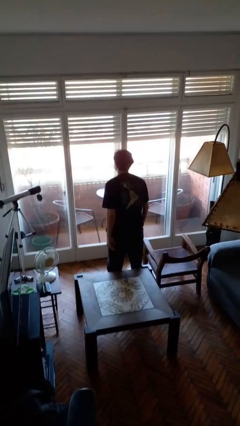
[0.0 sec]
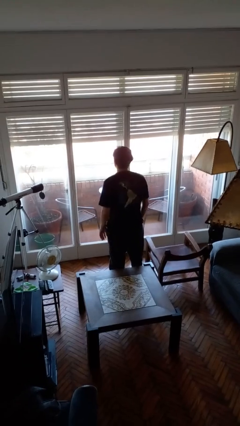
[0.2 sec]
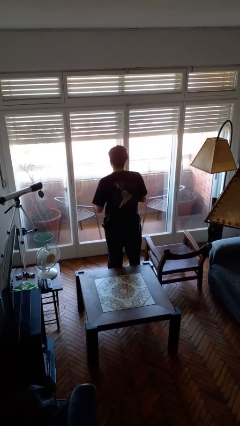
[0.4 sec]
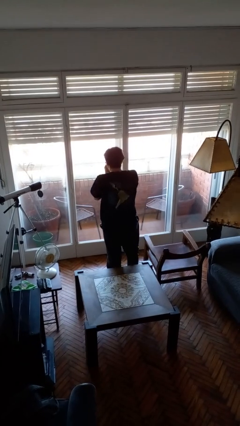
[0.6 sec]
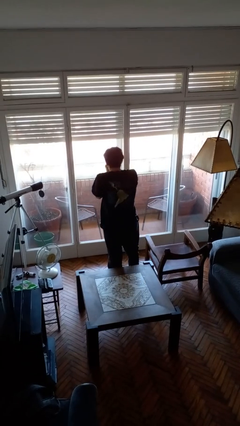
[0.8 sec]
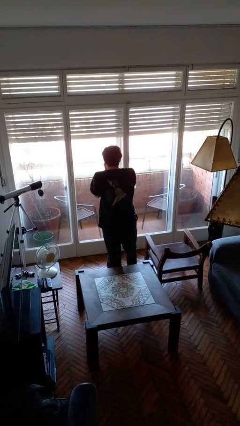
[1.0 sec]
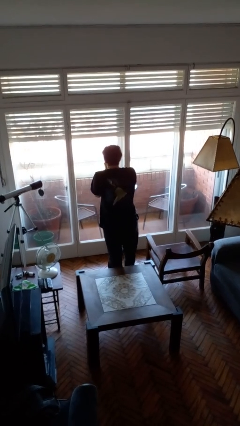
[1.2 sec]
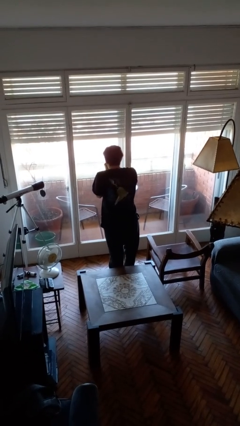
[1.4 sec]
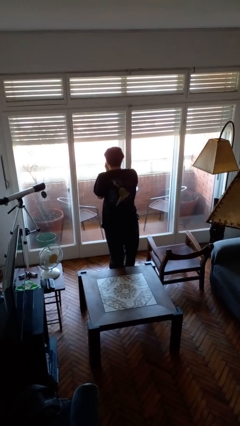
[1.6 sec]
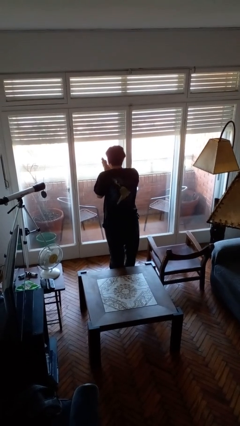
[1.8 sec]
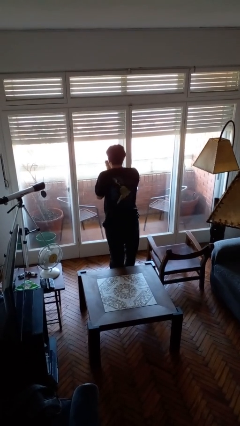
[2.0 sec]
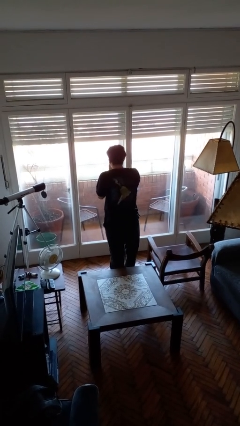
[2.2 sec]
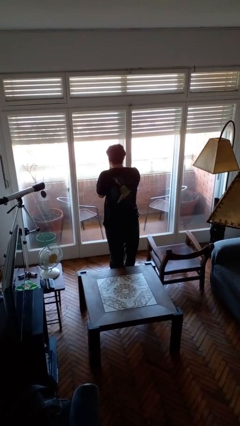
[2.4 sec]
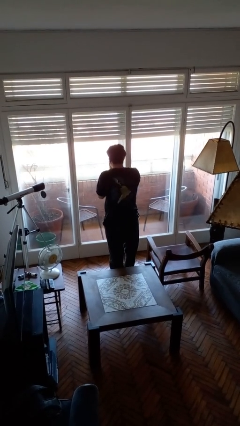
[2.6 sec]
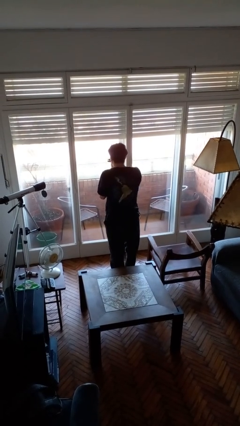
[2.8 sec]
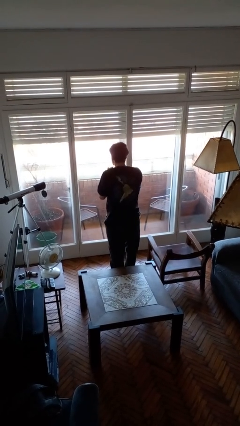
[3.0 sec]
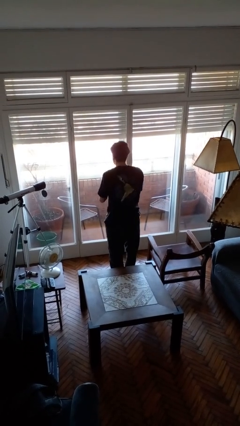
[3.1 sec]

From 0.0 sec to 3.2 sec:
person blows into hands

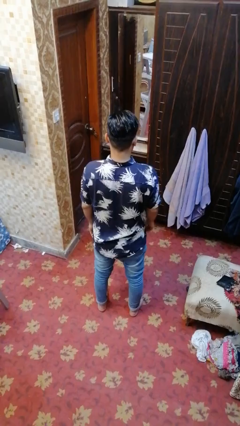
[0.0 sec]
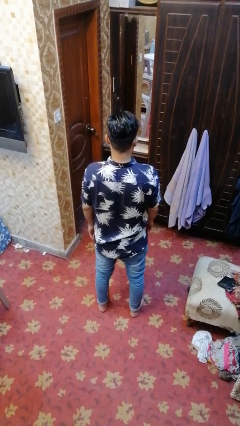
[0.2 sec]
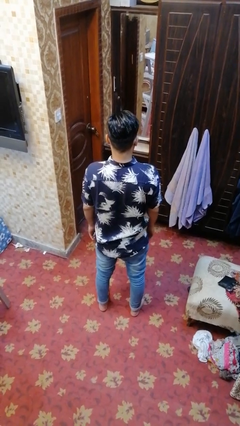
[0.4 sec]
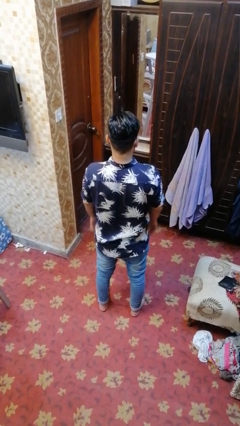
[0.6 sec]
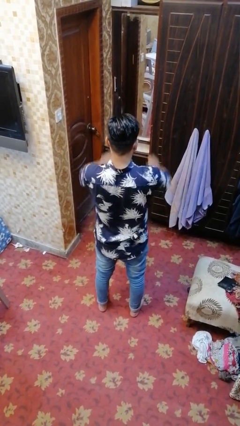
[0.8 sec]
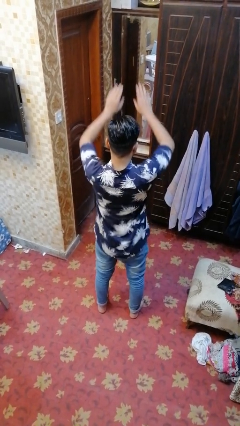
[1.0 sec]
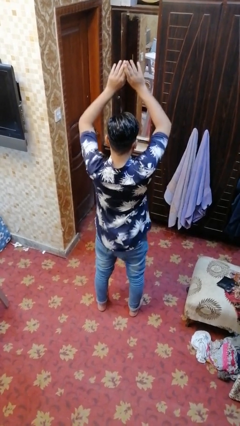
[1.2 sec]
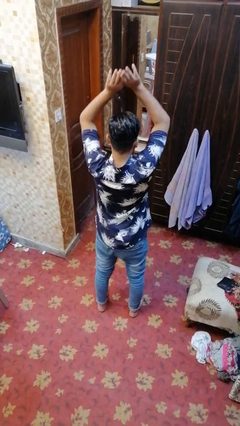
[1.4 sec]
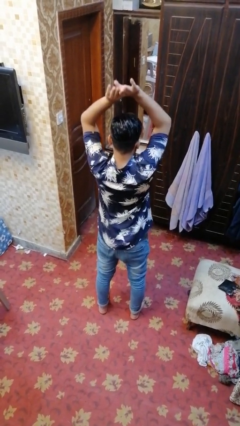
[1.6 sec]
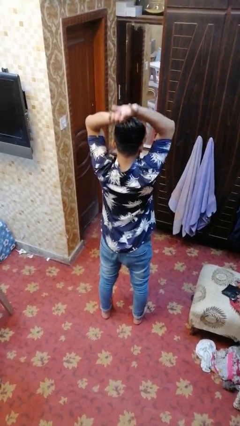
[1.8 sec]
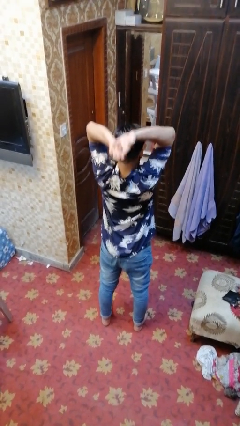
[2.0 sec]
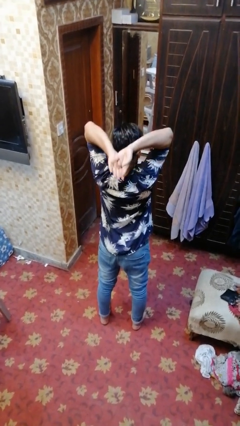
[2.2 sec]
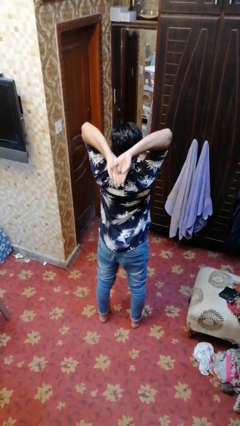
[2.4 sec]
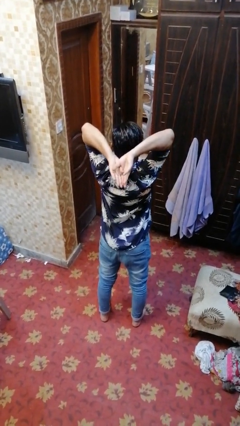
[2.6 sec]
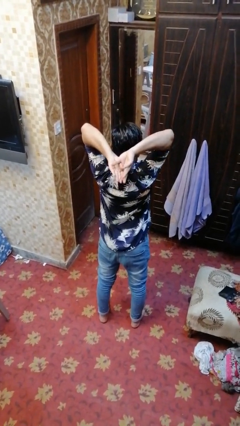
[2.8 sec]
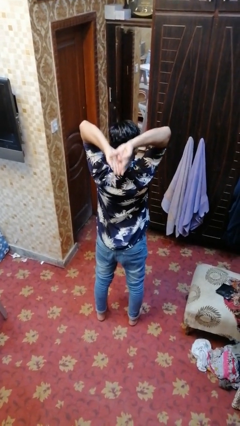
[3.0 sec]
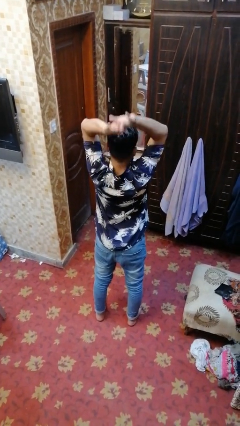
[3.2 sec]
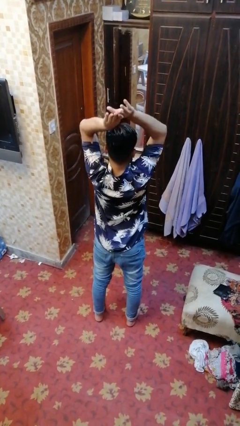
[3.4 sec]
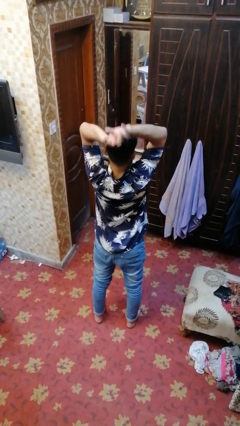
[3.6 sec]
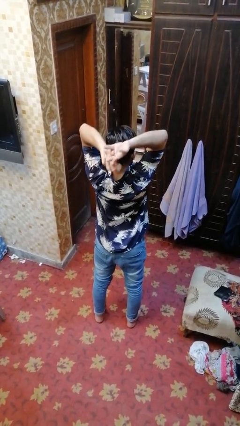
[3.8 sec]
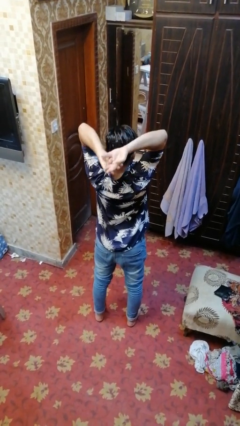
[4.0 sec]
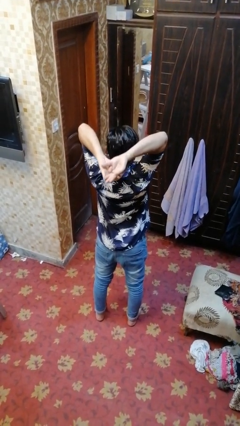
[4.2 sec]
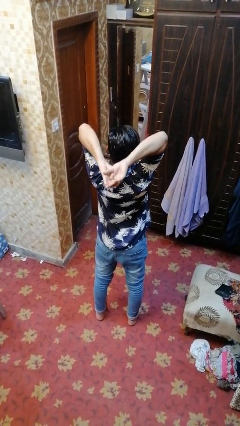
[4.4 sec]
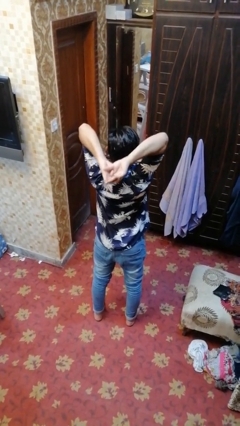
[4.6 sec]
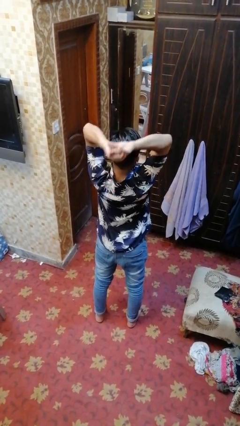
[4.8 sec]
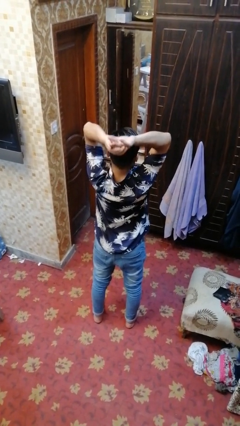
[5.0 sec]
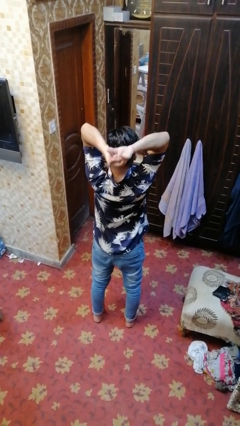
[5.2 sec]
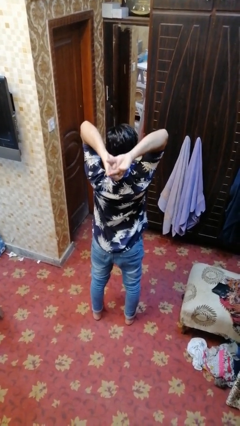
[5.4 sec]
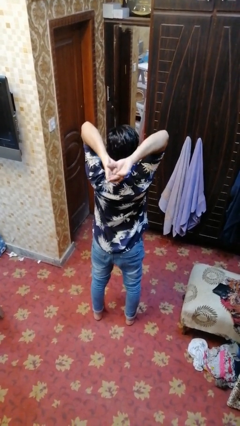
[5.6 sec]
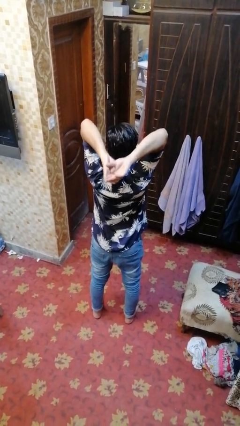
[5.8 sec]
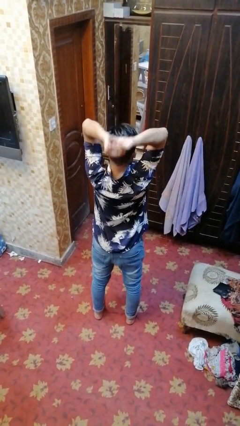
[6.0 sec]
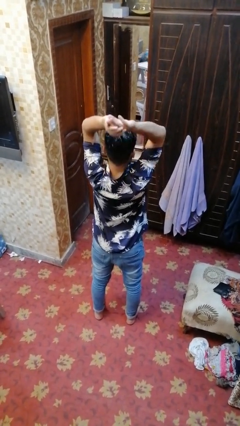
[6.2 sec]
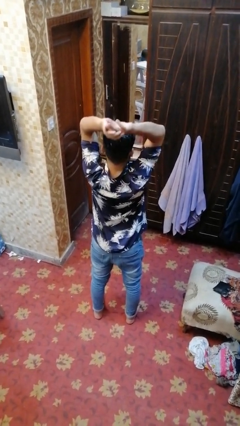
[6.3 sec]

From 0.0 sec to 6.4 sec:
person stretches arms over head

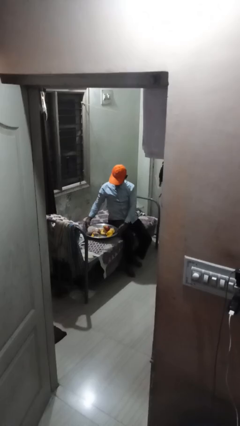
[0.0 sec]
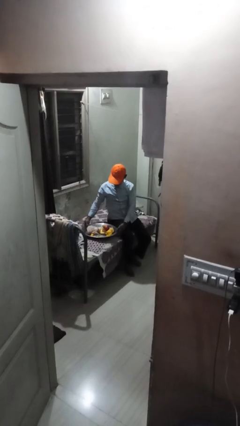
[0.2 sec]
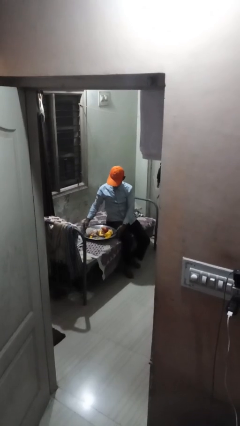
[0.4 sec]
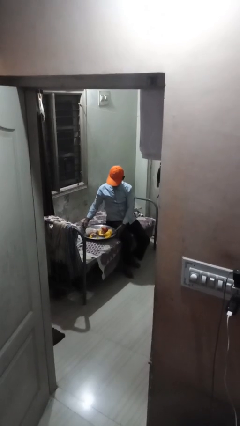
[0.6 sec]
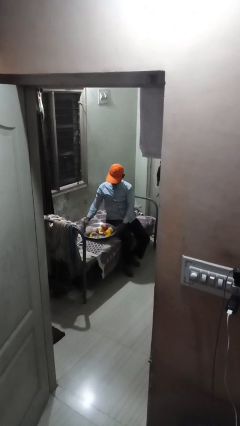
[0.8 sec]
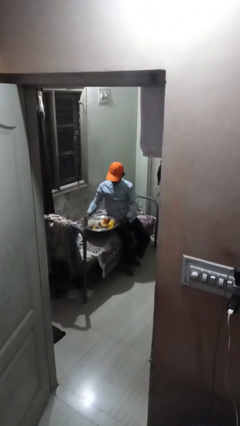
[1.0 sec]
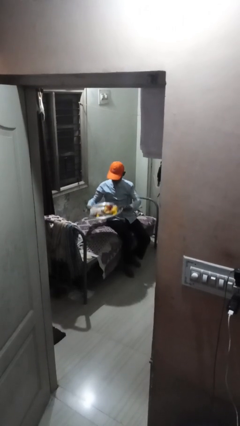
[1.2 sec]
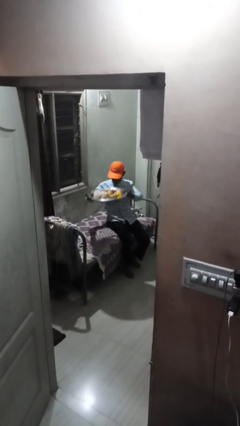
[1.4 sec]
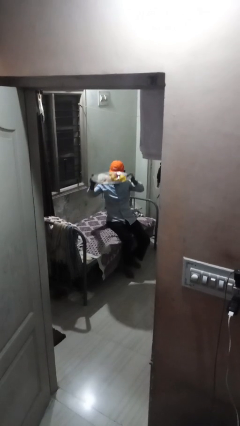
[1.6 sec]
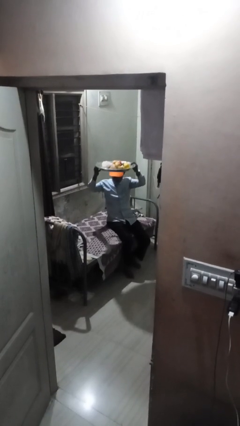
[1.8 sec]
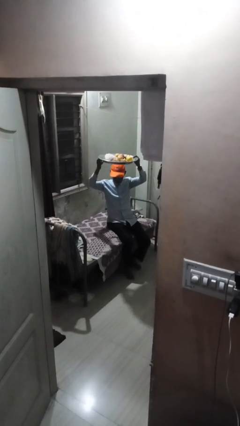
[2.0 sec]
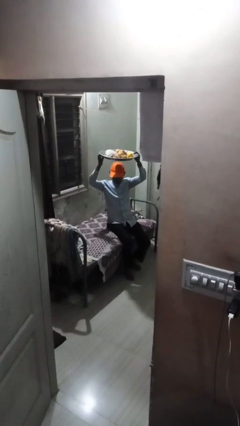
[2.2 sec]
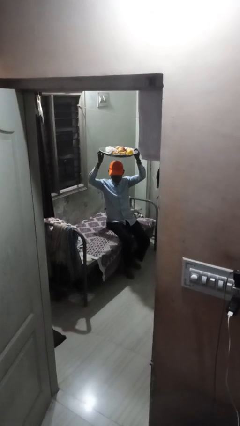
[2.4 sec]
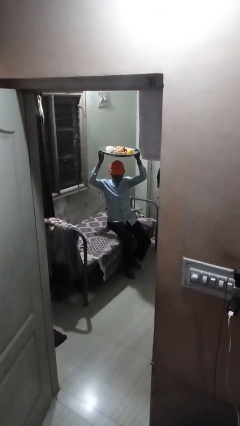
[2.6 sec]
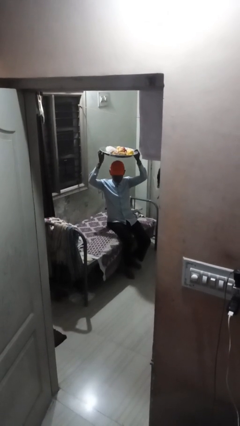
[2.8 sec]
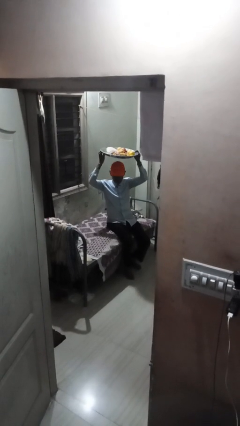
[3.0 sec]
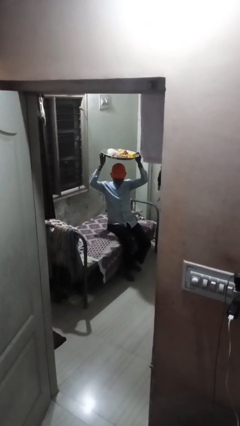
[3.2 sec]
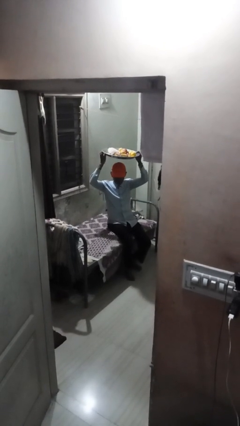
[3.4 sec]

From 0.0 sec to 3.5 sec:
person holds object above head

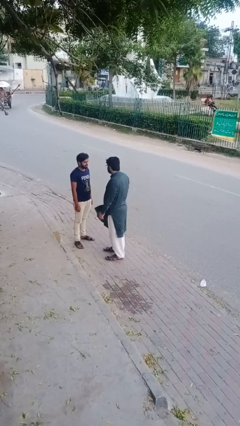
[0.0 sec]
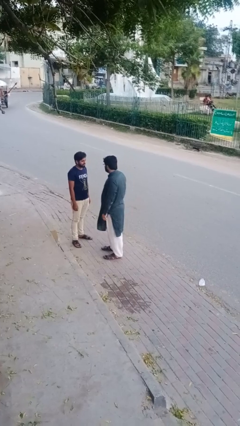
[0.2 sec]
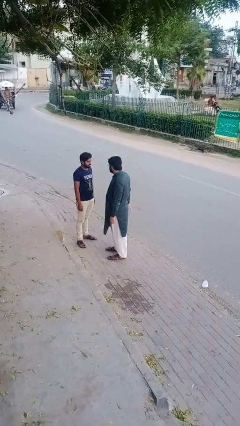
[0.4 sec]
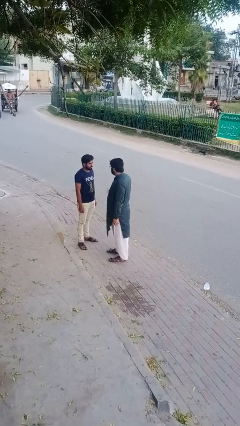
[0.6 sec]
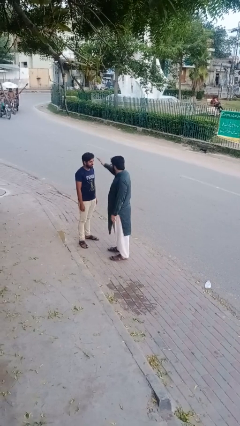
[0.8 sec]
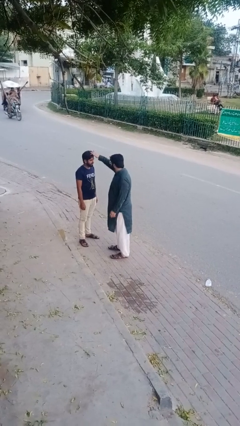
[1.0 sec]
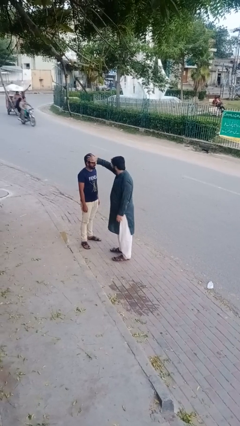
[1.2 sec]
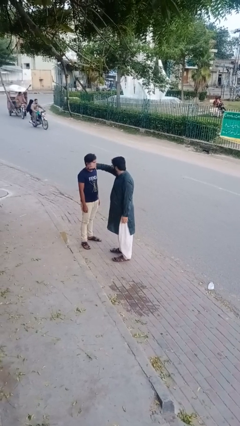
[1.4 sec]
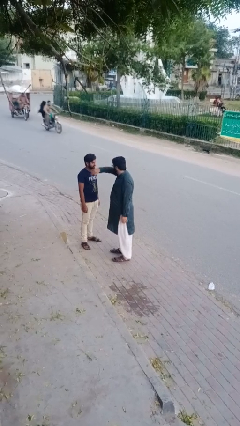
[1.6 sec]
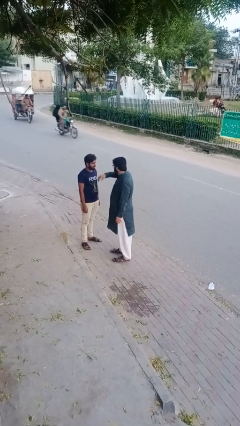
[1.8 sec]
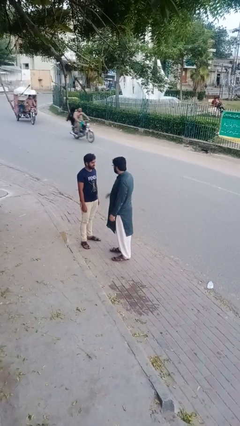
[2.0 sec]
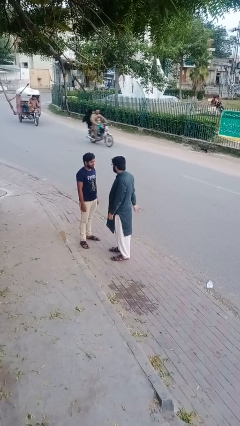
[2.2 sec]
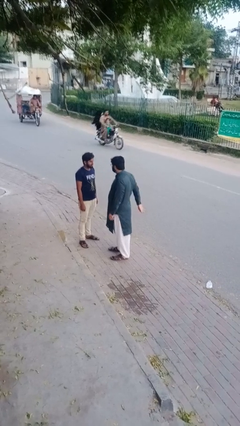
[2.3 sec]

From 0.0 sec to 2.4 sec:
person grabs person by hair

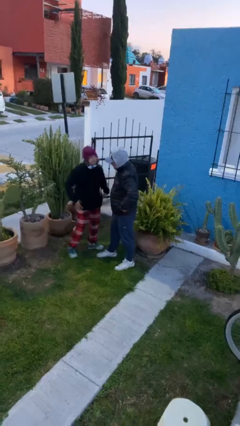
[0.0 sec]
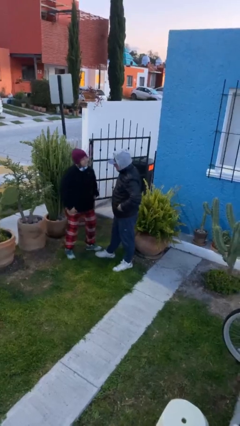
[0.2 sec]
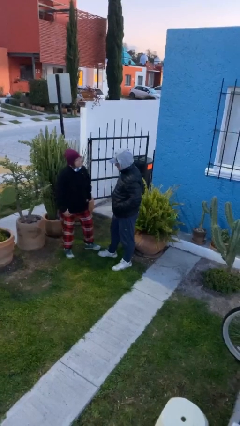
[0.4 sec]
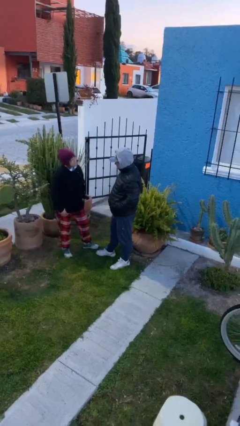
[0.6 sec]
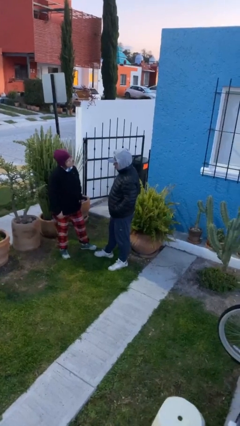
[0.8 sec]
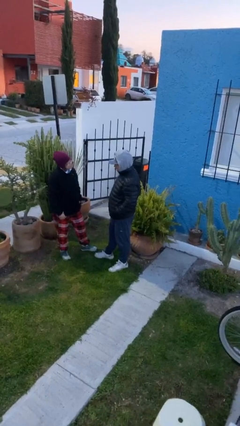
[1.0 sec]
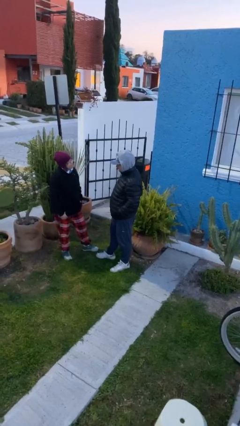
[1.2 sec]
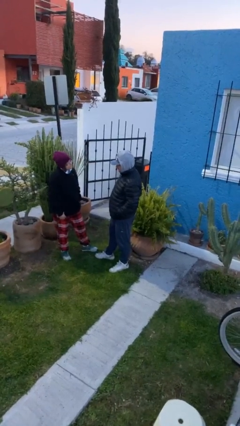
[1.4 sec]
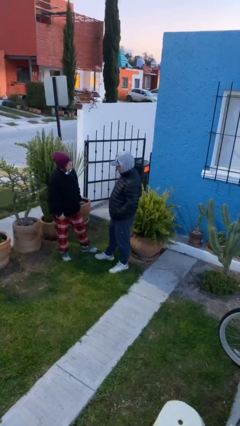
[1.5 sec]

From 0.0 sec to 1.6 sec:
person talks to person
